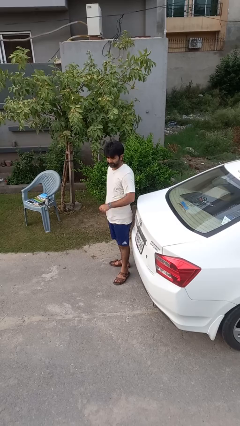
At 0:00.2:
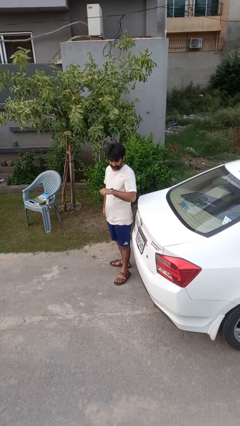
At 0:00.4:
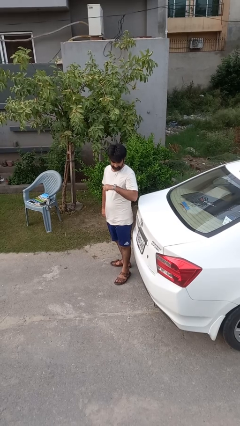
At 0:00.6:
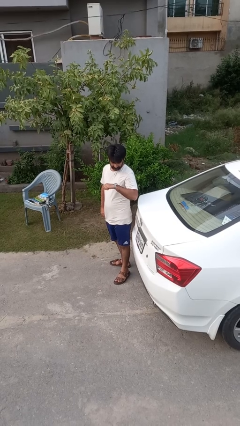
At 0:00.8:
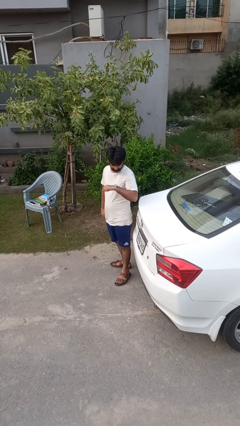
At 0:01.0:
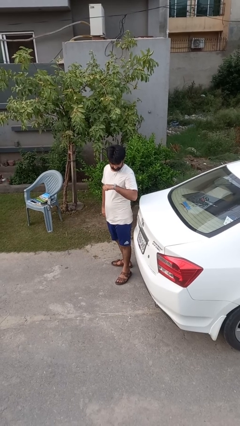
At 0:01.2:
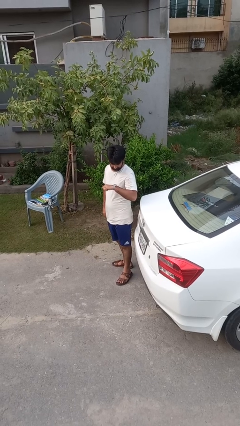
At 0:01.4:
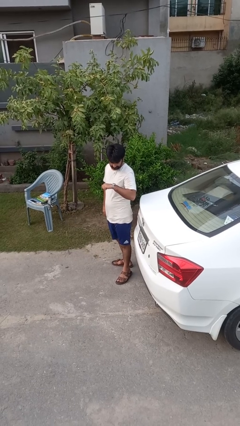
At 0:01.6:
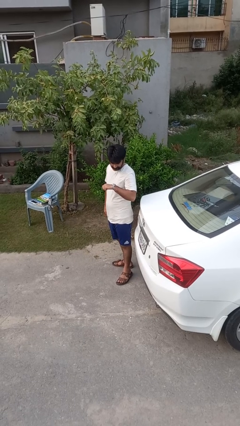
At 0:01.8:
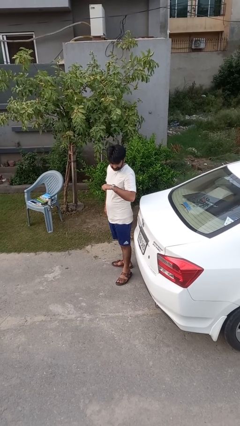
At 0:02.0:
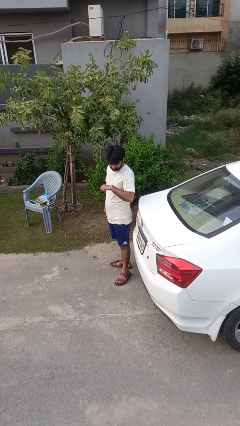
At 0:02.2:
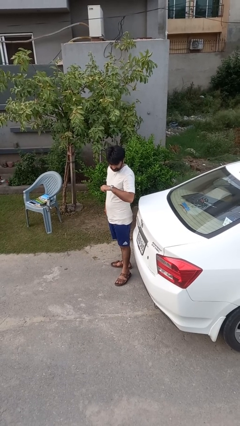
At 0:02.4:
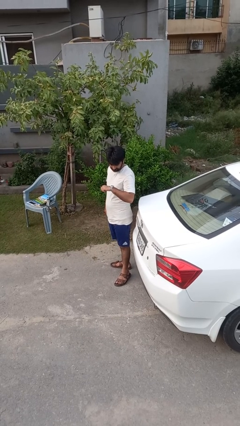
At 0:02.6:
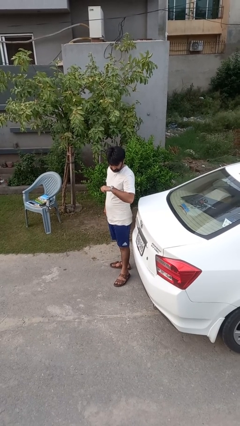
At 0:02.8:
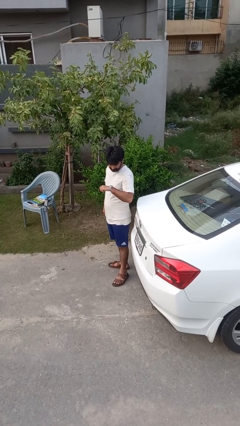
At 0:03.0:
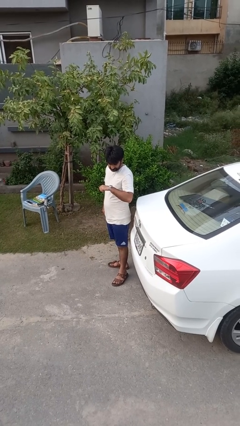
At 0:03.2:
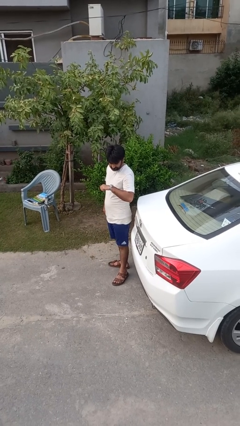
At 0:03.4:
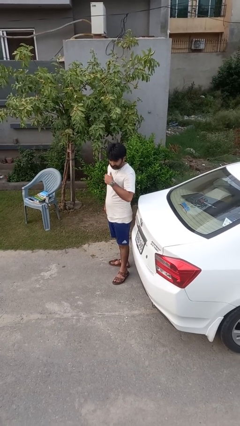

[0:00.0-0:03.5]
person looks at wristwatch

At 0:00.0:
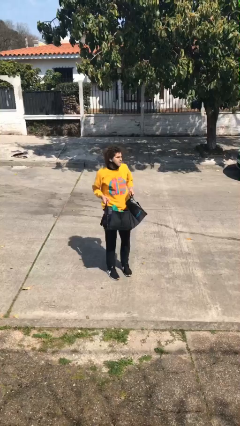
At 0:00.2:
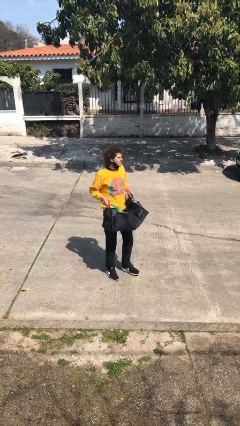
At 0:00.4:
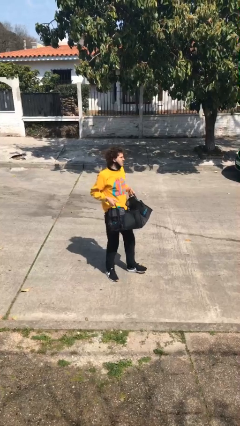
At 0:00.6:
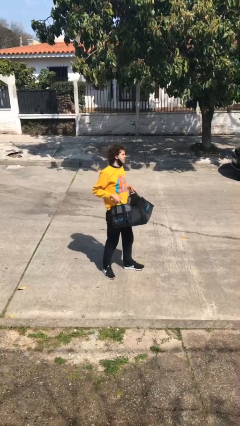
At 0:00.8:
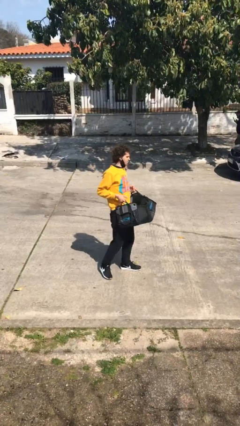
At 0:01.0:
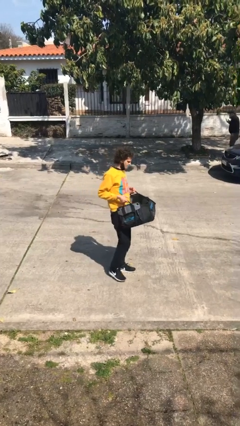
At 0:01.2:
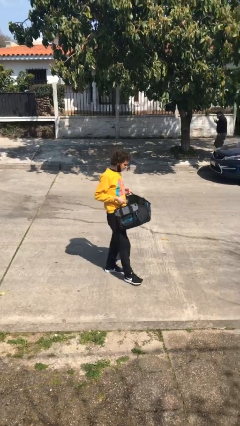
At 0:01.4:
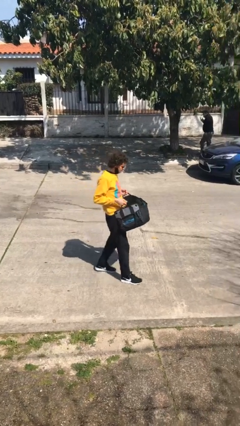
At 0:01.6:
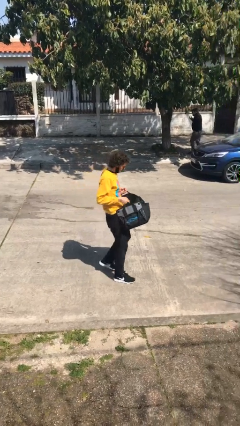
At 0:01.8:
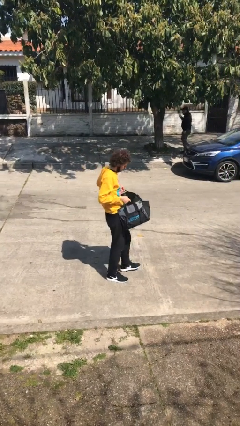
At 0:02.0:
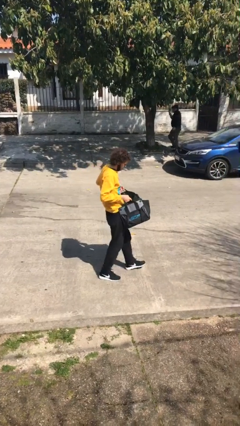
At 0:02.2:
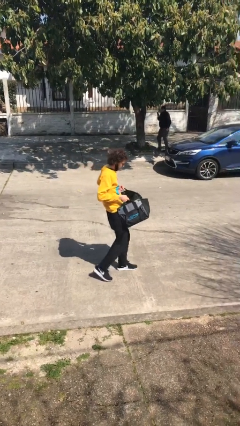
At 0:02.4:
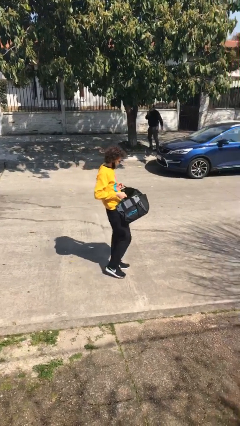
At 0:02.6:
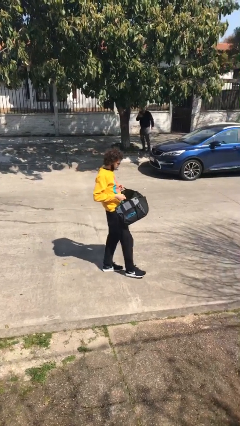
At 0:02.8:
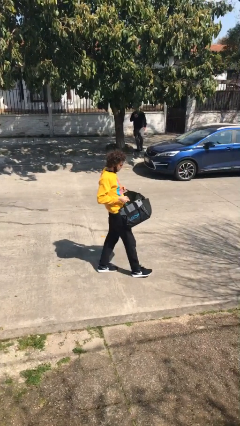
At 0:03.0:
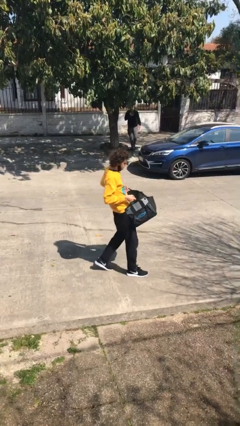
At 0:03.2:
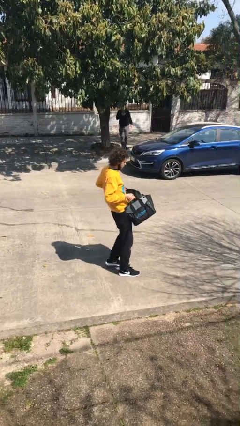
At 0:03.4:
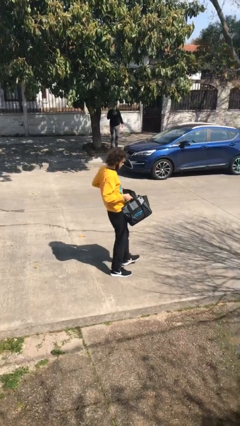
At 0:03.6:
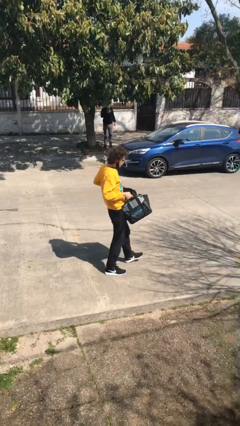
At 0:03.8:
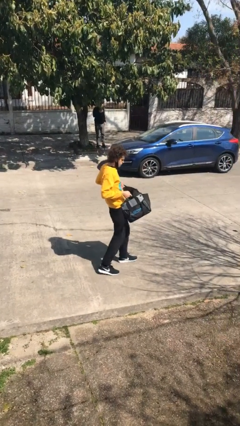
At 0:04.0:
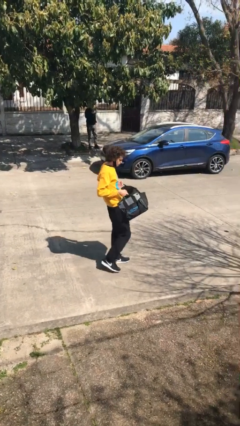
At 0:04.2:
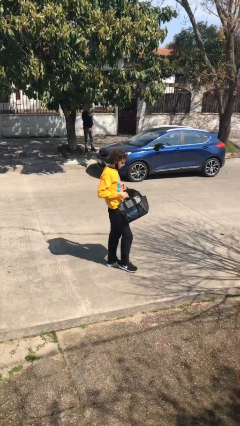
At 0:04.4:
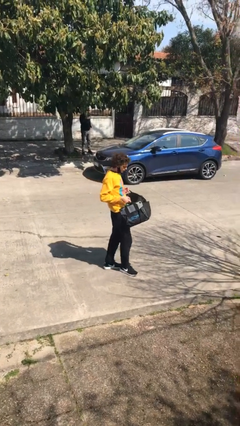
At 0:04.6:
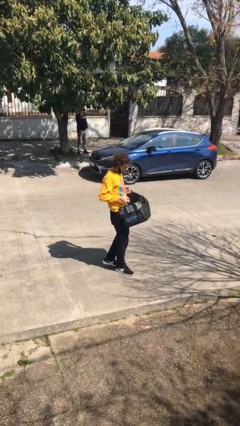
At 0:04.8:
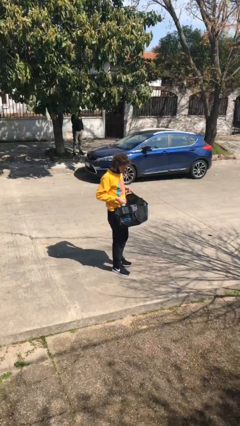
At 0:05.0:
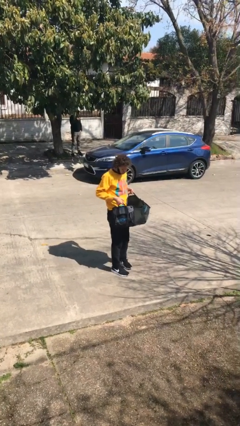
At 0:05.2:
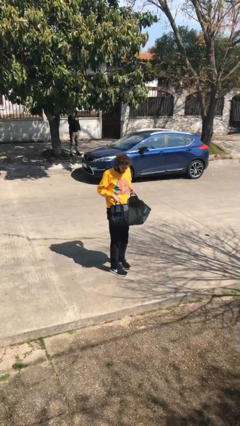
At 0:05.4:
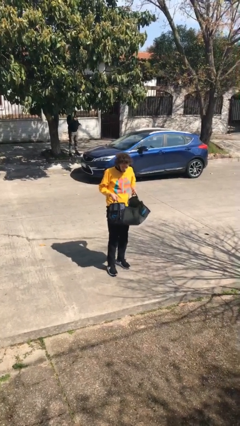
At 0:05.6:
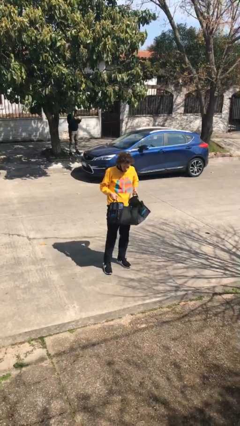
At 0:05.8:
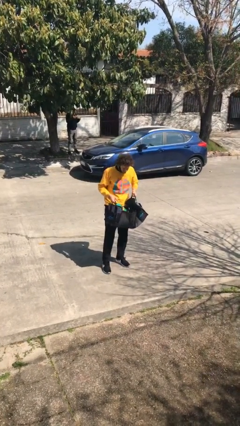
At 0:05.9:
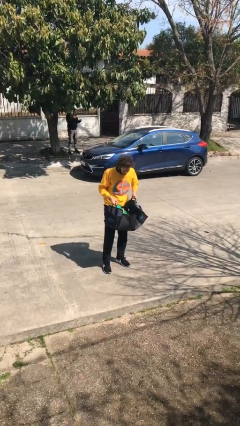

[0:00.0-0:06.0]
person carries heavy object

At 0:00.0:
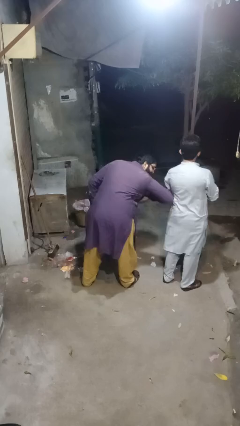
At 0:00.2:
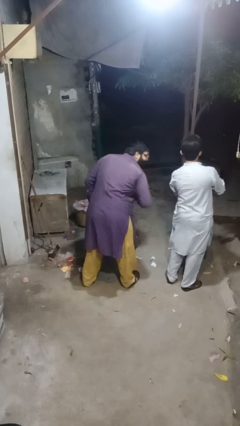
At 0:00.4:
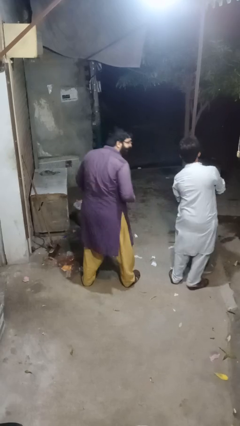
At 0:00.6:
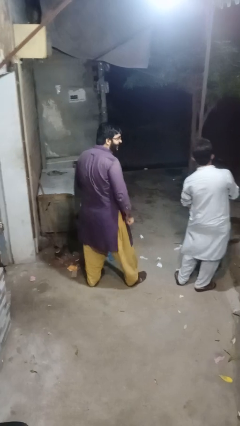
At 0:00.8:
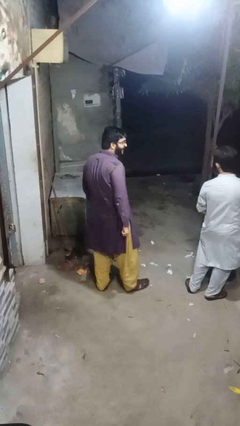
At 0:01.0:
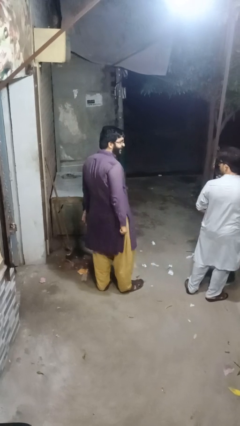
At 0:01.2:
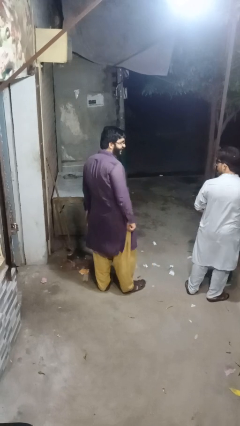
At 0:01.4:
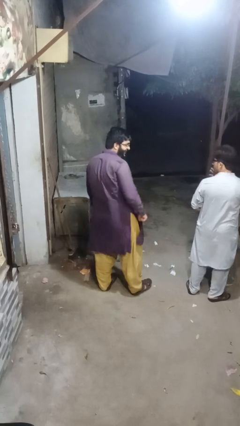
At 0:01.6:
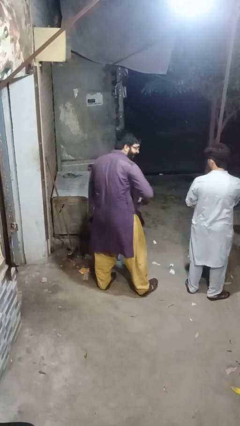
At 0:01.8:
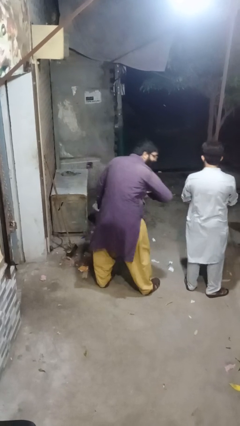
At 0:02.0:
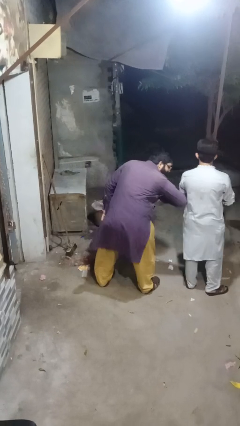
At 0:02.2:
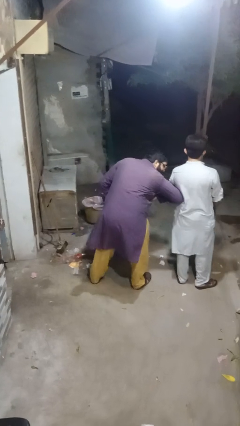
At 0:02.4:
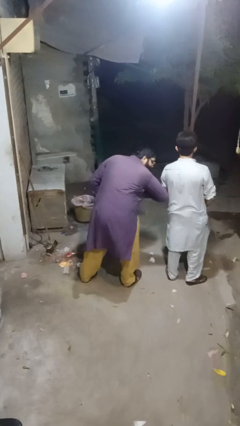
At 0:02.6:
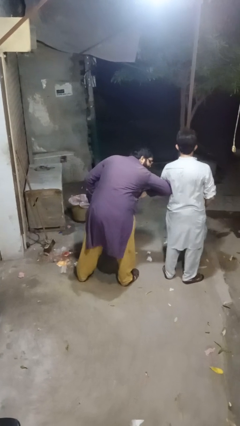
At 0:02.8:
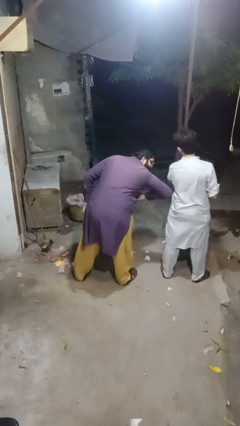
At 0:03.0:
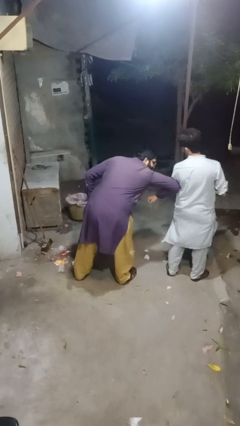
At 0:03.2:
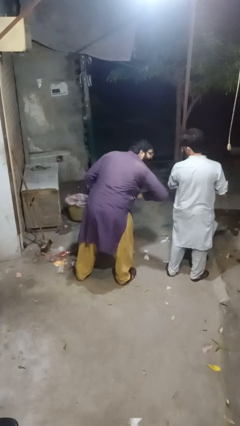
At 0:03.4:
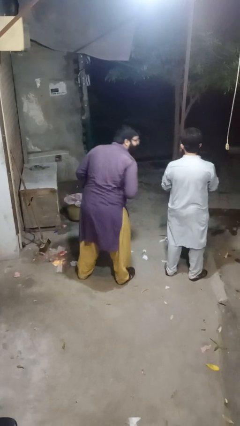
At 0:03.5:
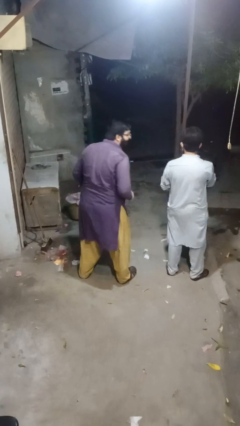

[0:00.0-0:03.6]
person nudges person with elbow

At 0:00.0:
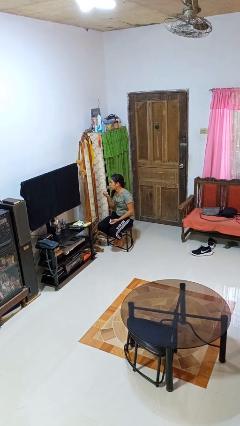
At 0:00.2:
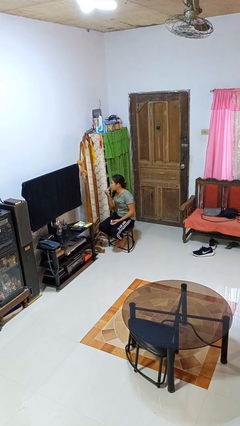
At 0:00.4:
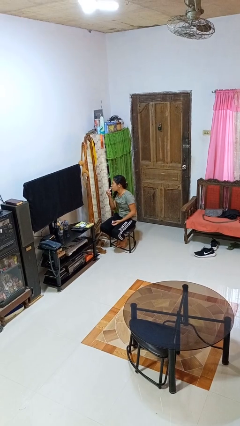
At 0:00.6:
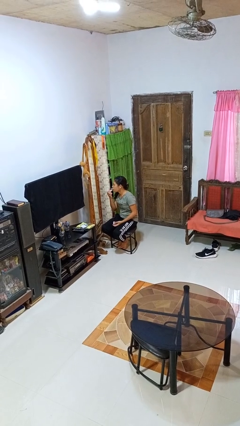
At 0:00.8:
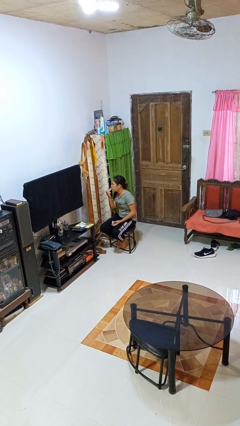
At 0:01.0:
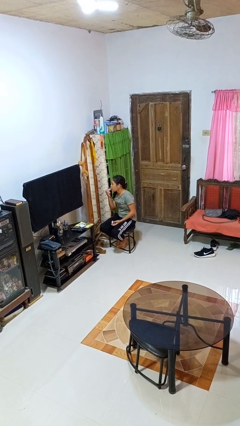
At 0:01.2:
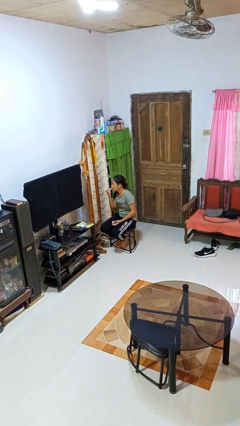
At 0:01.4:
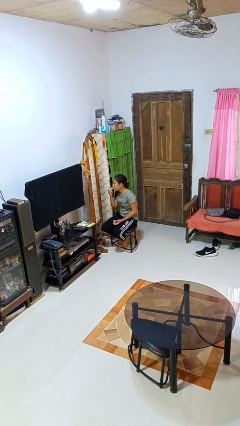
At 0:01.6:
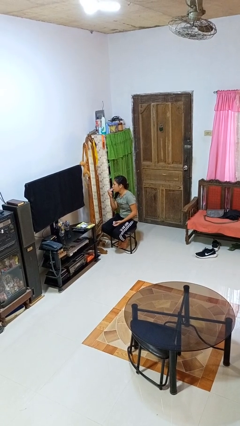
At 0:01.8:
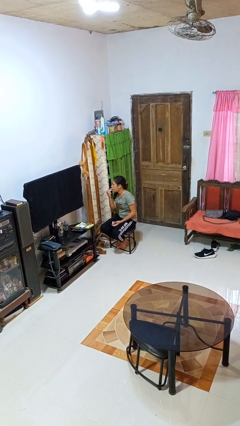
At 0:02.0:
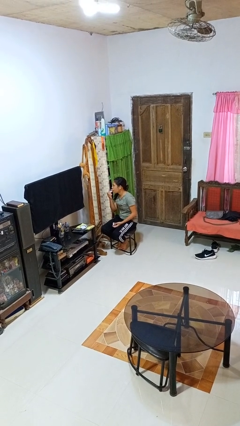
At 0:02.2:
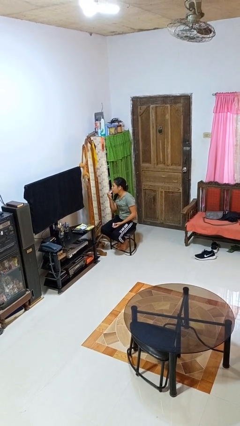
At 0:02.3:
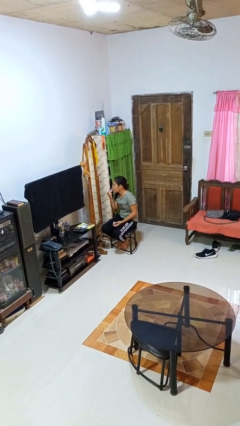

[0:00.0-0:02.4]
person applies lip makeup

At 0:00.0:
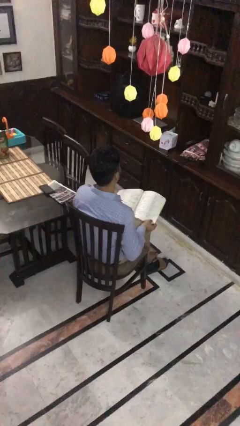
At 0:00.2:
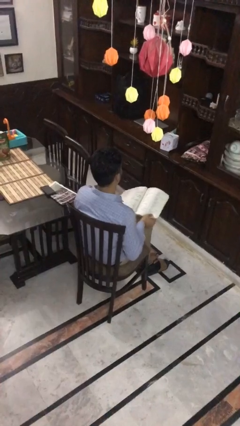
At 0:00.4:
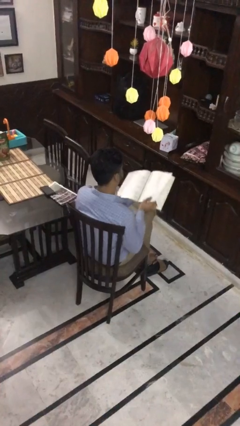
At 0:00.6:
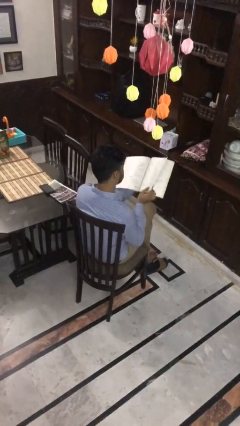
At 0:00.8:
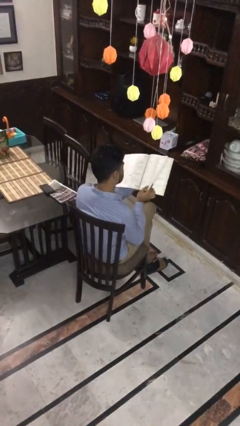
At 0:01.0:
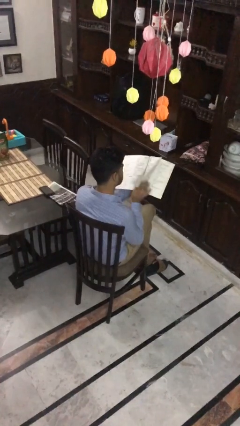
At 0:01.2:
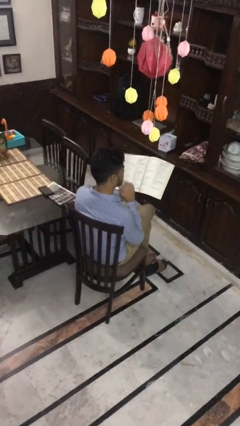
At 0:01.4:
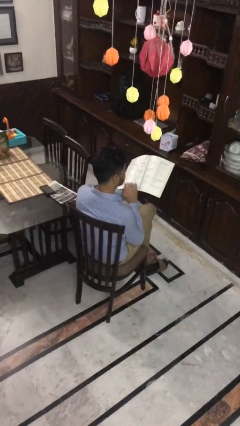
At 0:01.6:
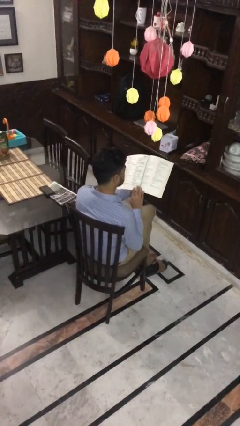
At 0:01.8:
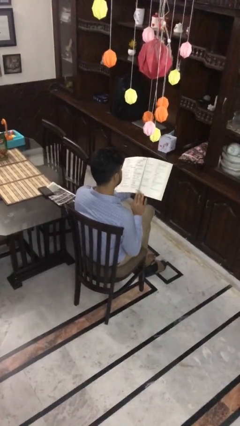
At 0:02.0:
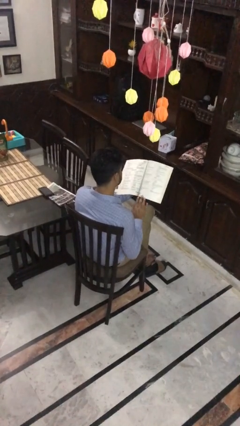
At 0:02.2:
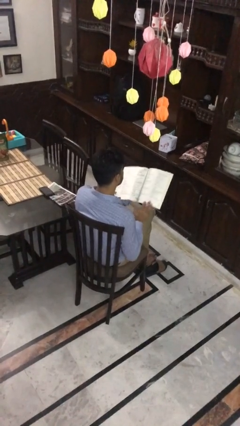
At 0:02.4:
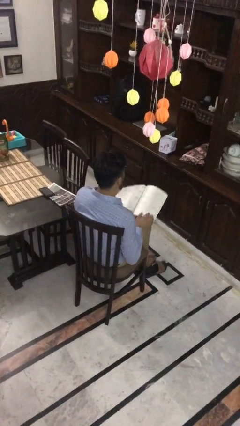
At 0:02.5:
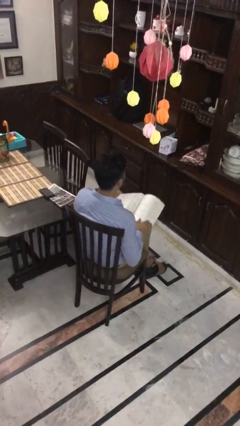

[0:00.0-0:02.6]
person reads book
